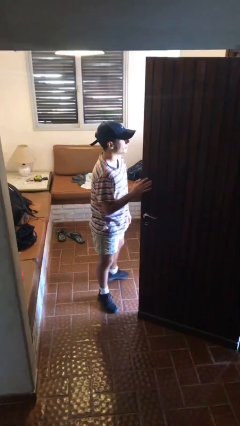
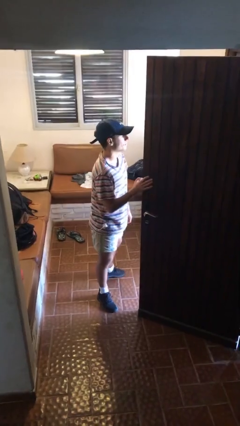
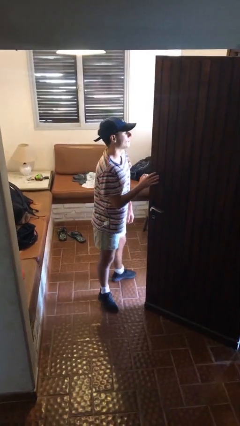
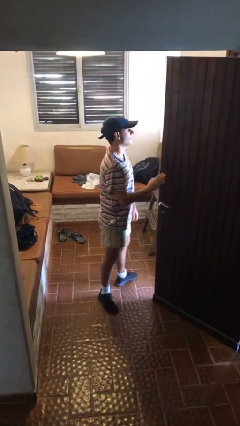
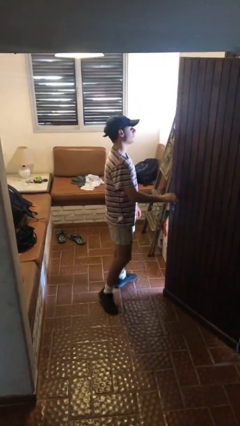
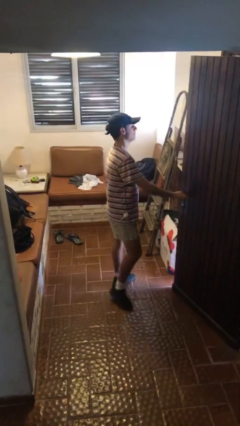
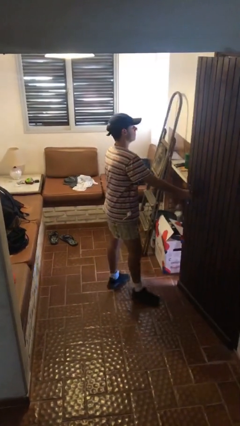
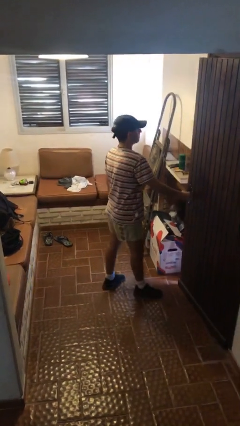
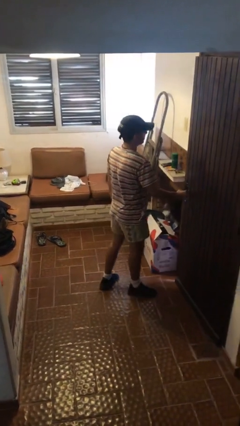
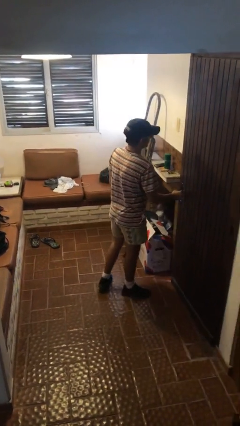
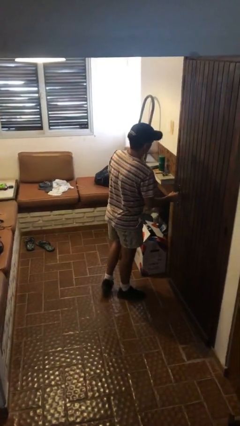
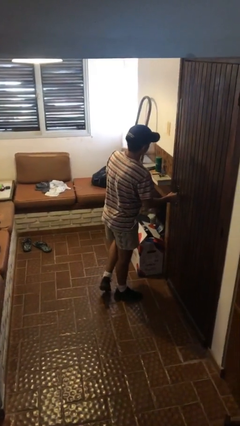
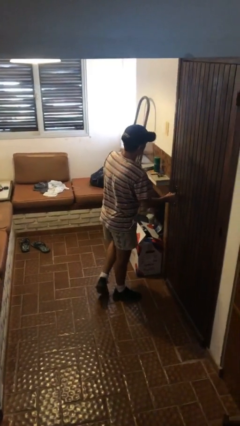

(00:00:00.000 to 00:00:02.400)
person closes facility door

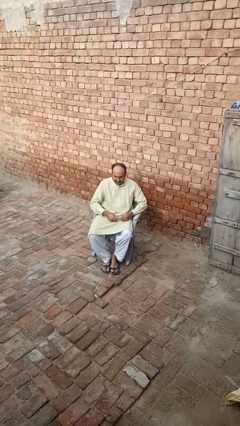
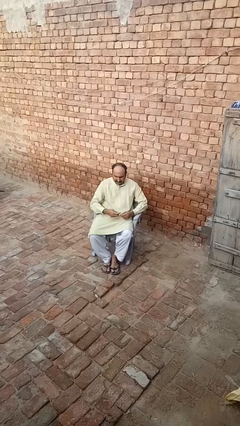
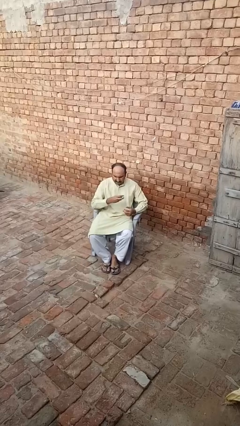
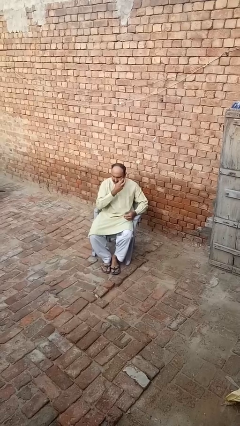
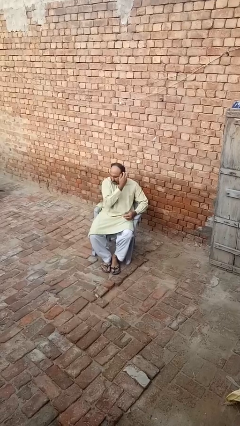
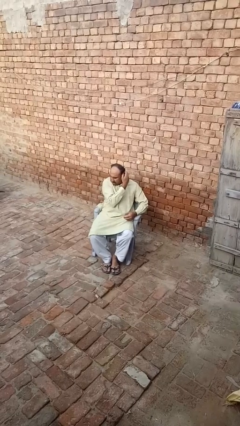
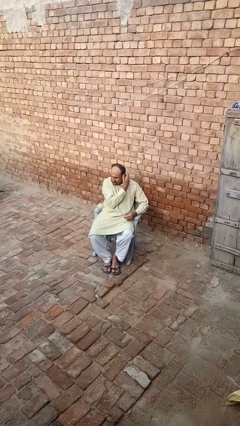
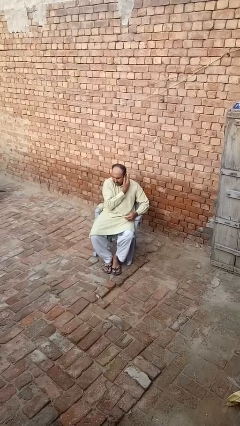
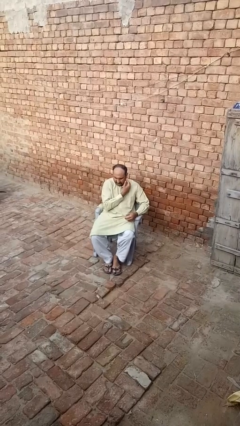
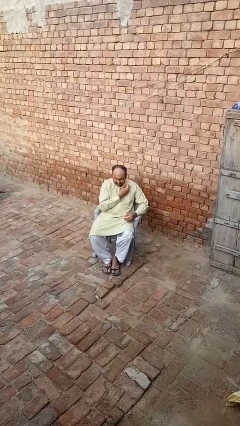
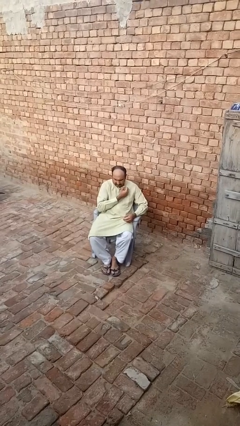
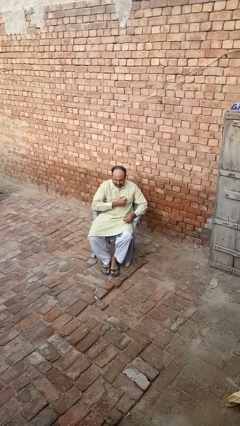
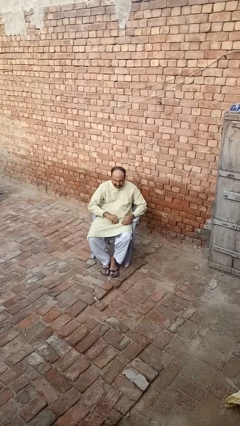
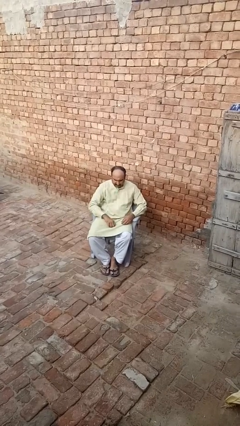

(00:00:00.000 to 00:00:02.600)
person puts on earrings

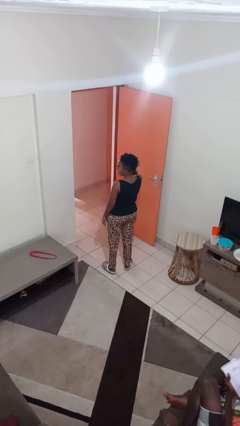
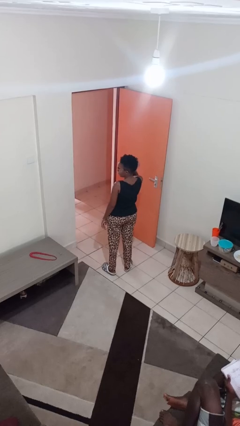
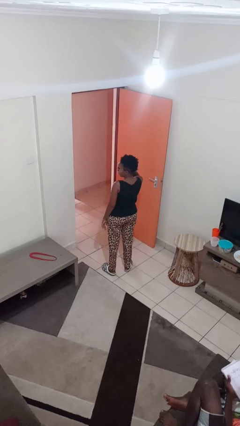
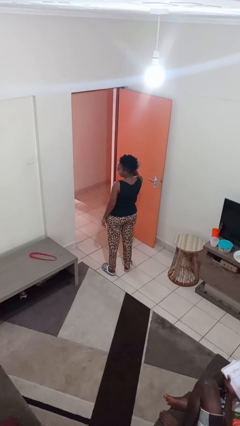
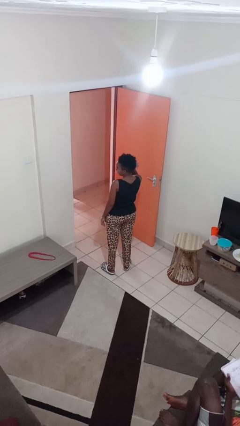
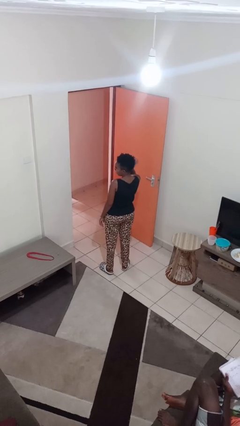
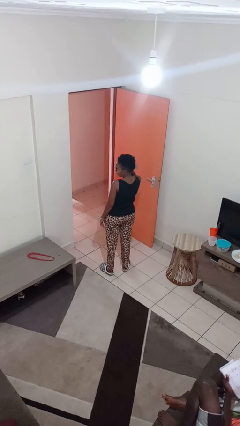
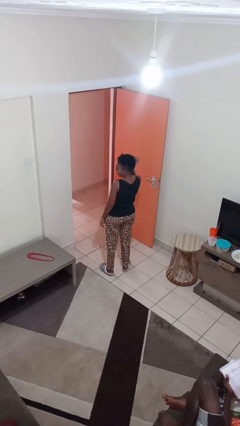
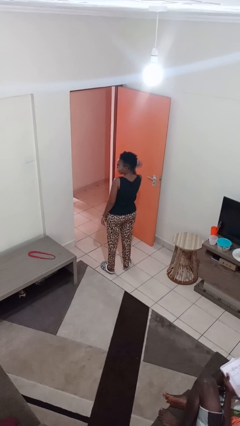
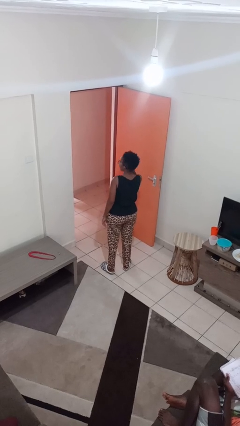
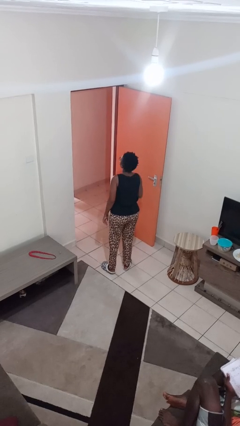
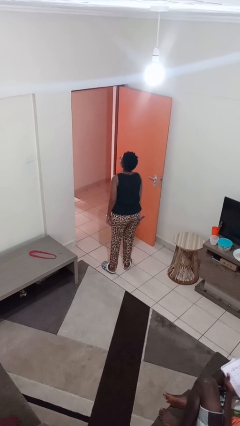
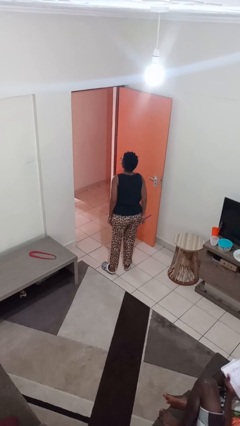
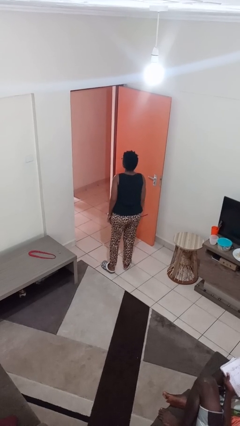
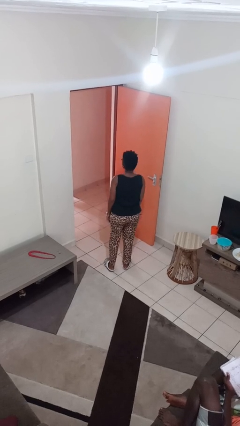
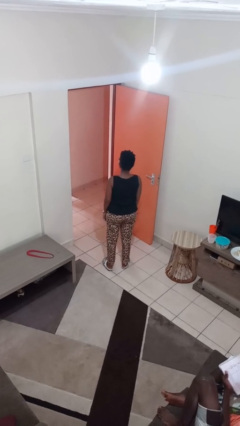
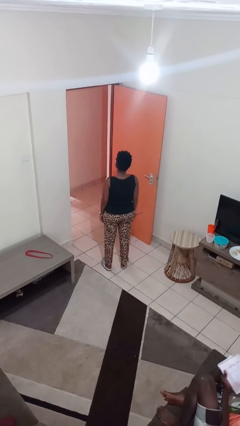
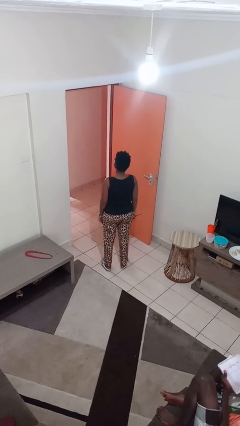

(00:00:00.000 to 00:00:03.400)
person brushes hair

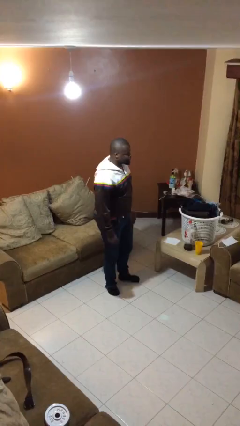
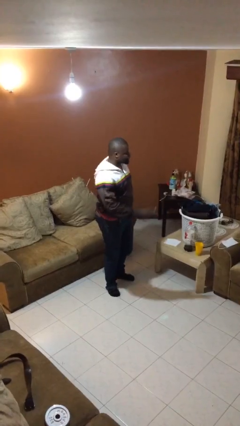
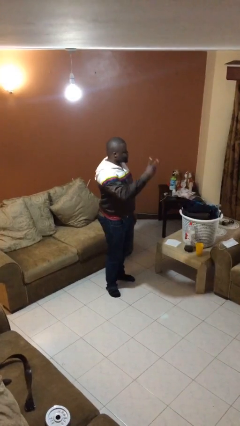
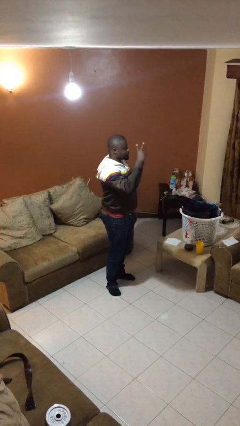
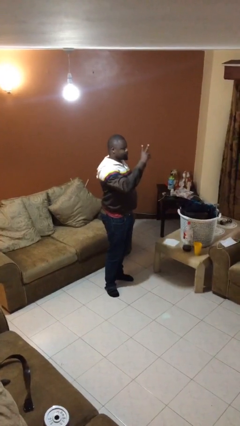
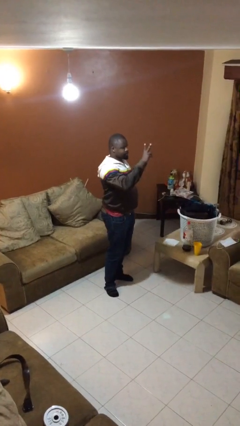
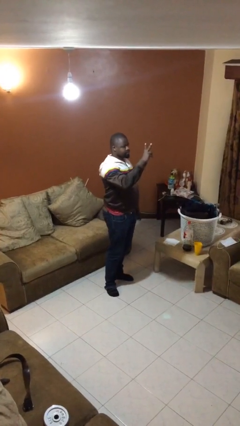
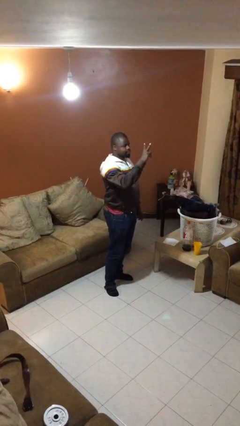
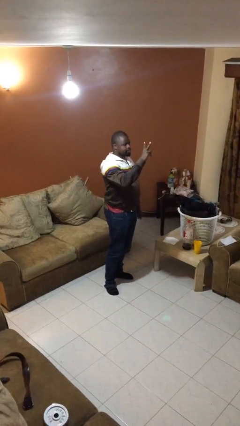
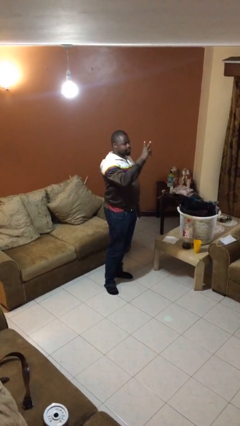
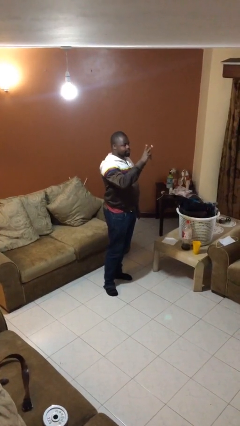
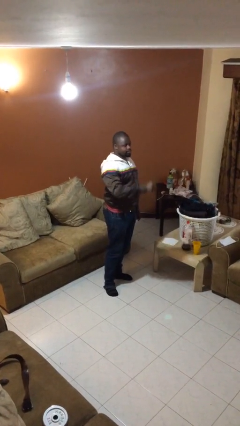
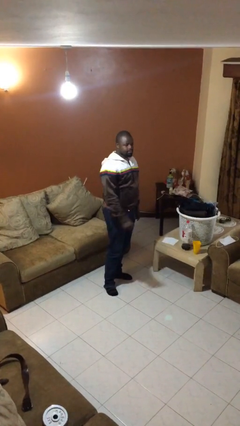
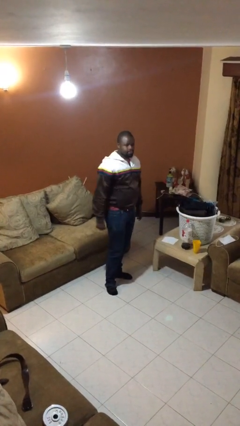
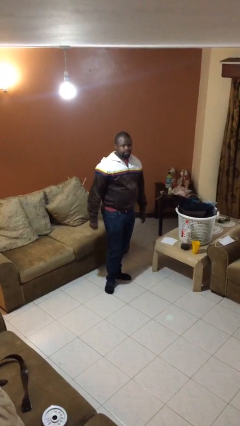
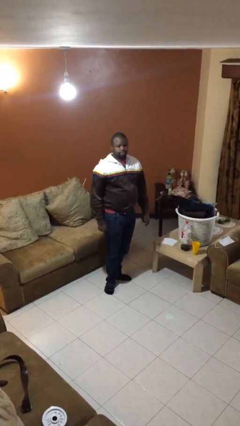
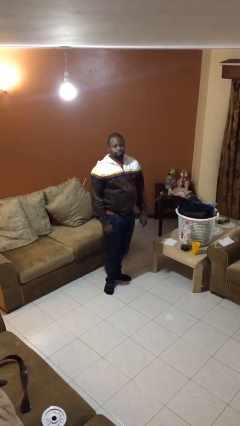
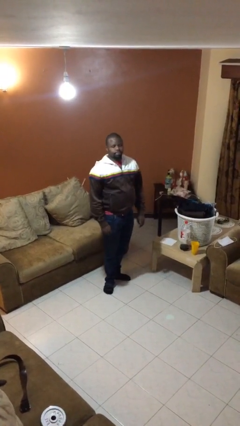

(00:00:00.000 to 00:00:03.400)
person gestures peace

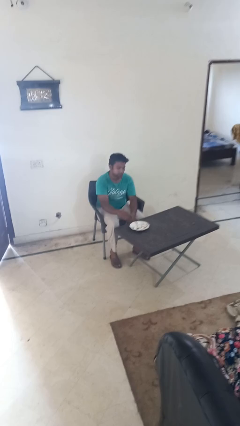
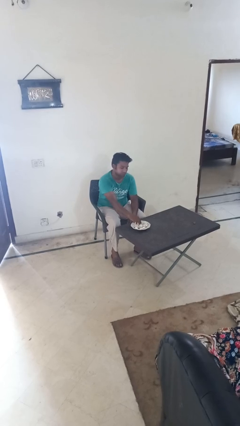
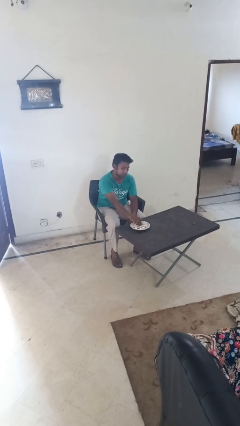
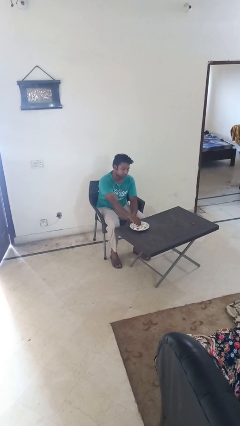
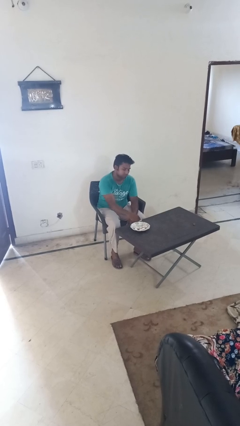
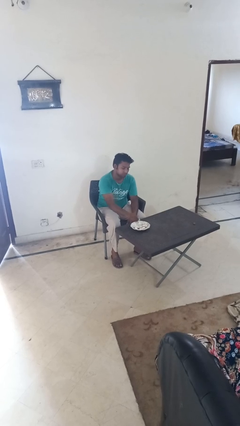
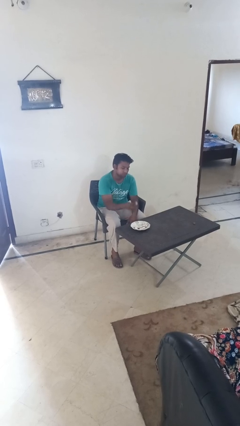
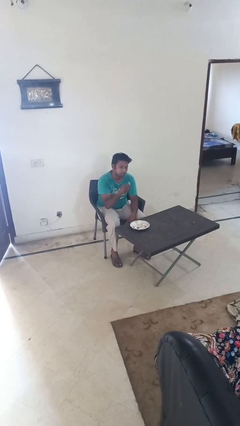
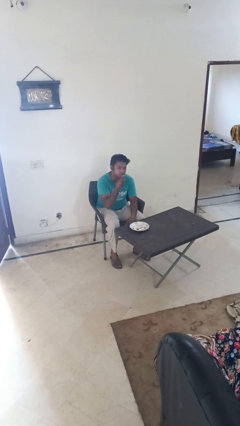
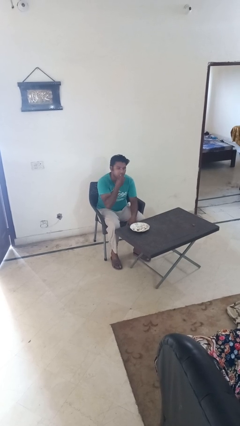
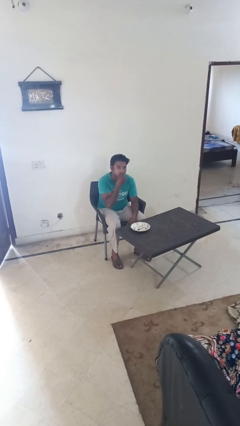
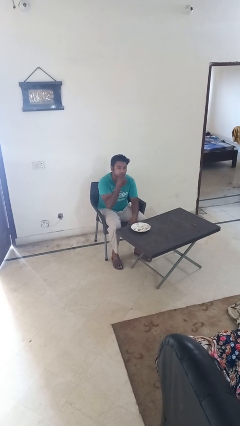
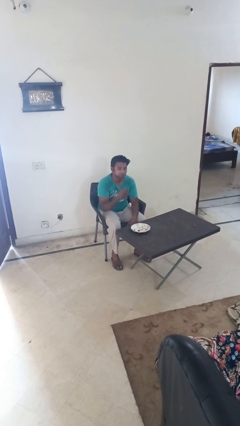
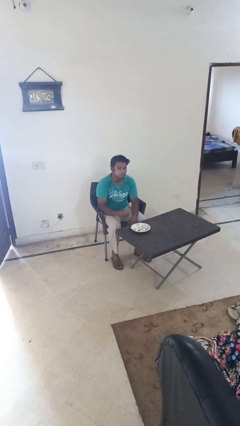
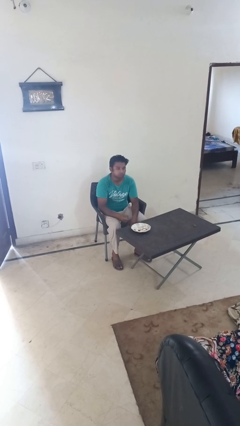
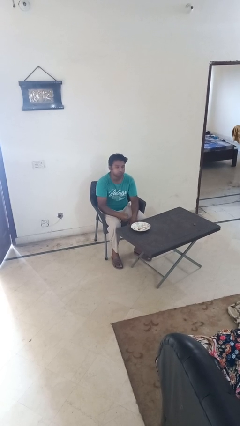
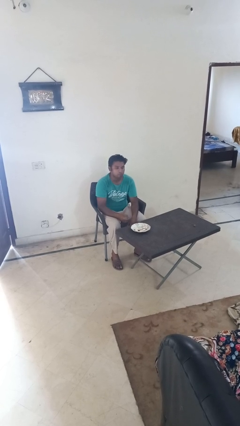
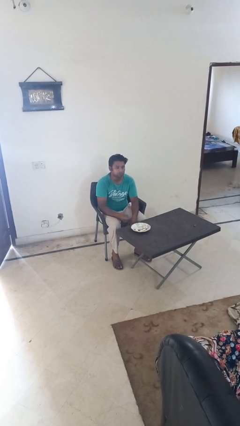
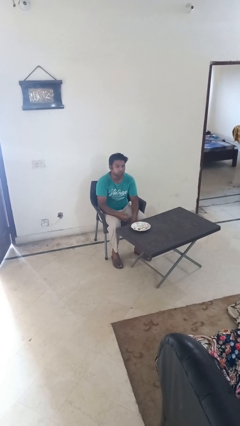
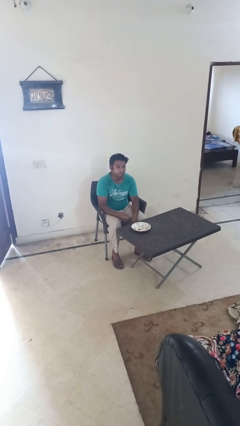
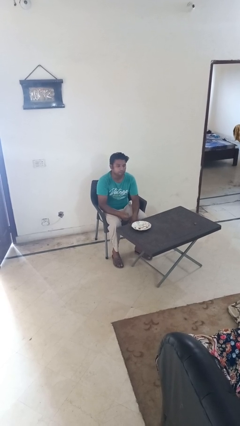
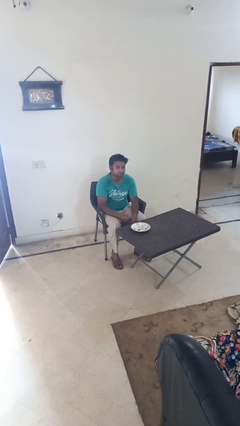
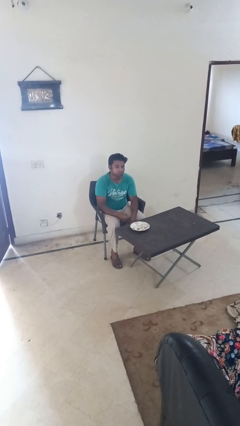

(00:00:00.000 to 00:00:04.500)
person eats with hands

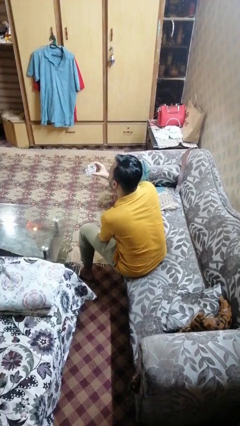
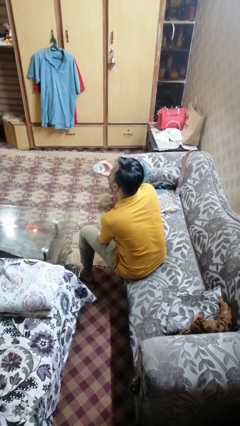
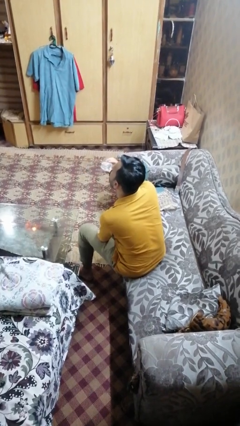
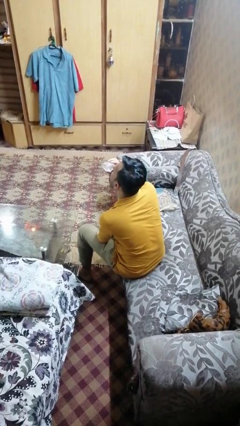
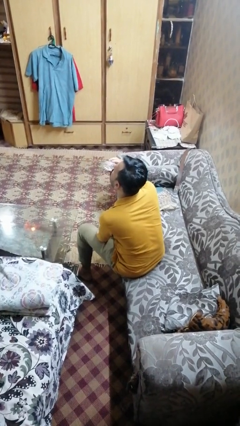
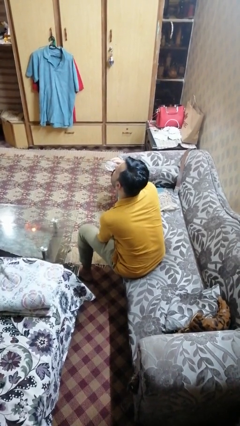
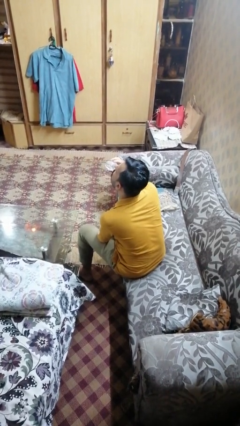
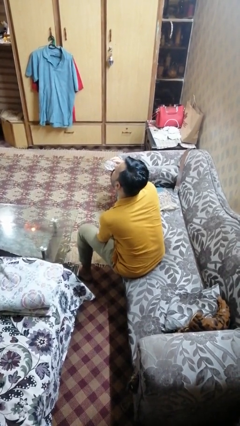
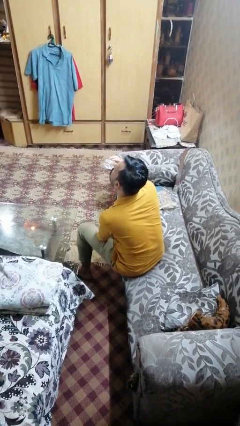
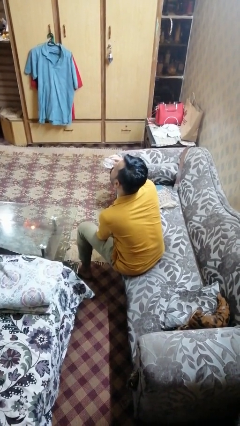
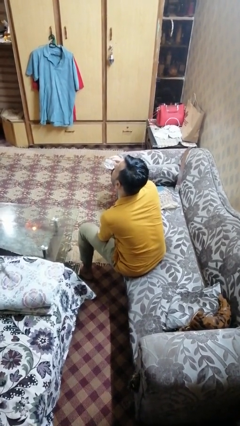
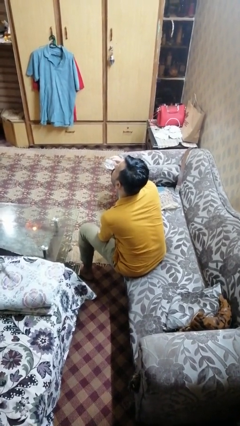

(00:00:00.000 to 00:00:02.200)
person drinks from shotglass
